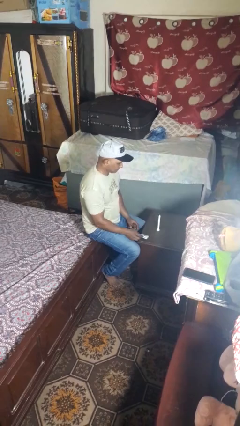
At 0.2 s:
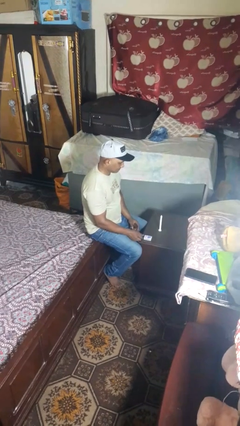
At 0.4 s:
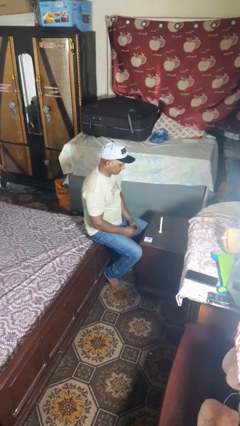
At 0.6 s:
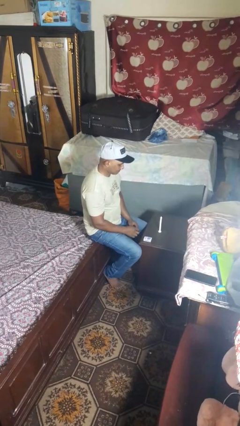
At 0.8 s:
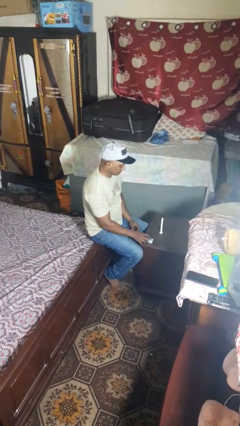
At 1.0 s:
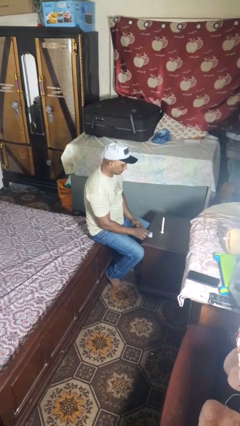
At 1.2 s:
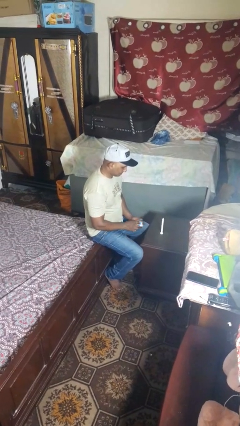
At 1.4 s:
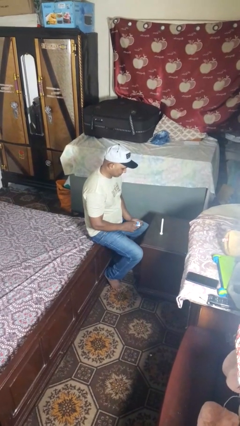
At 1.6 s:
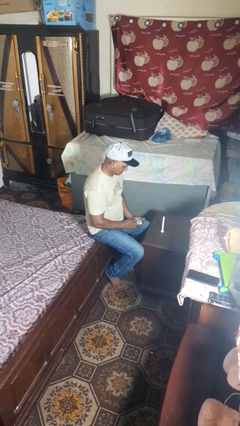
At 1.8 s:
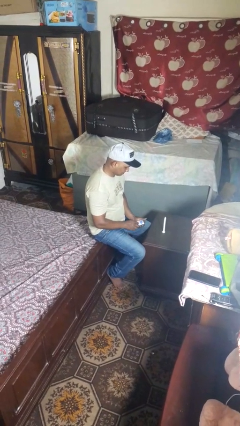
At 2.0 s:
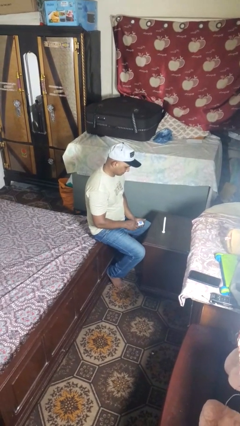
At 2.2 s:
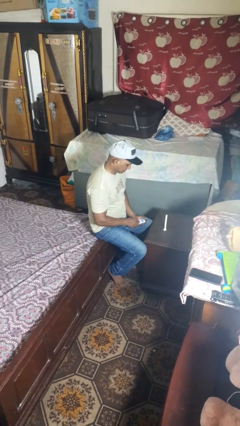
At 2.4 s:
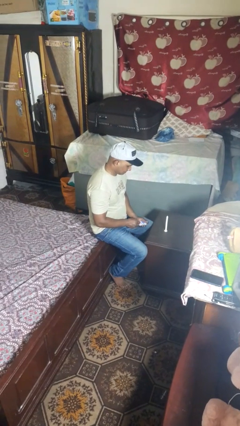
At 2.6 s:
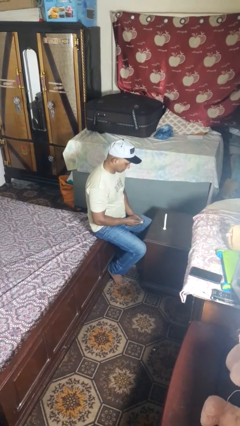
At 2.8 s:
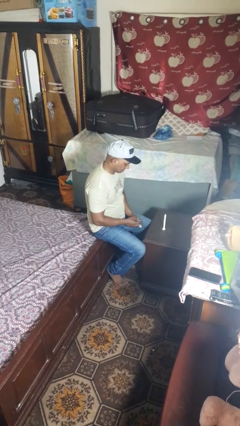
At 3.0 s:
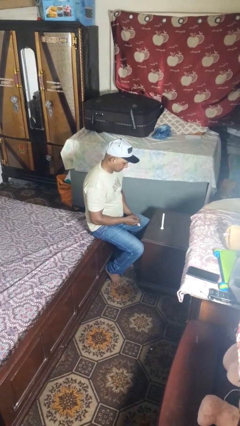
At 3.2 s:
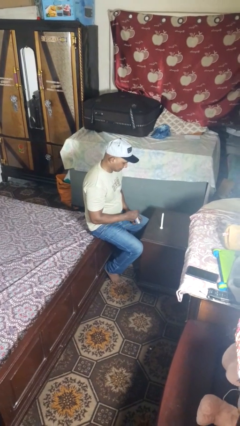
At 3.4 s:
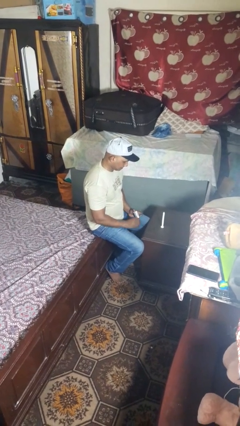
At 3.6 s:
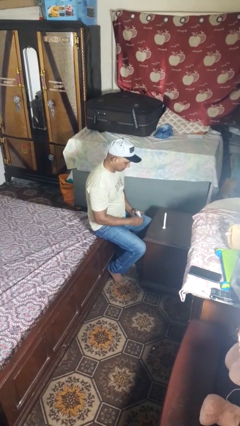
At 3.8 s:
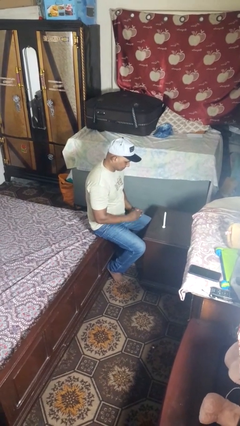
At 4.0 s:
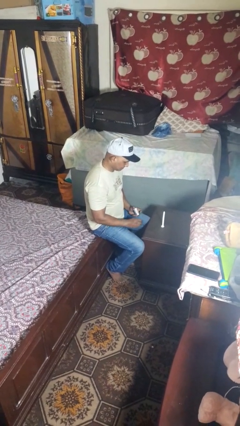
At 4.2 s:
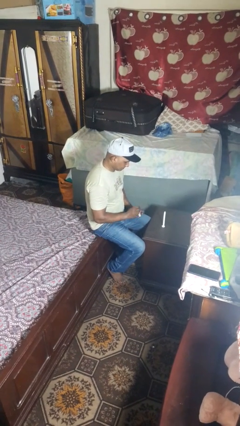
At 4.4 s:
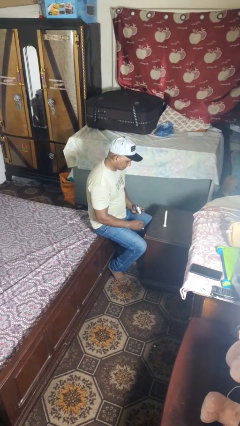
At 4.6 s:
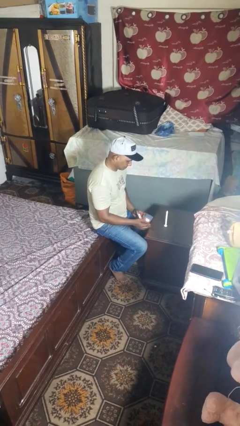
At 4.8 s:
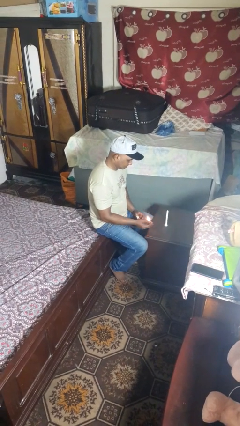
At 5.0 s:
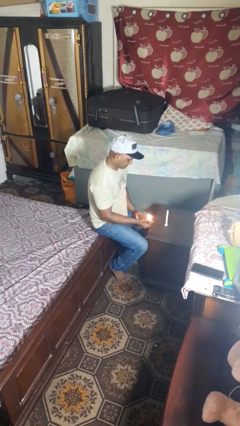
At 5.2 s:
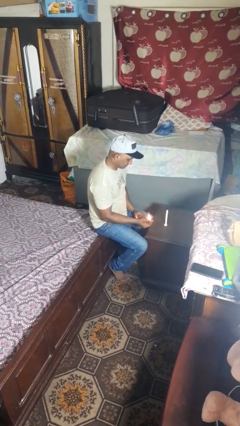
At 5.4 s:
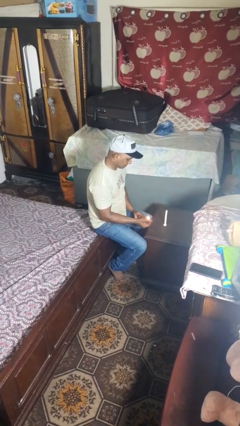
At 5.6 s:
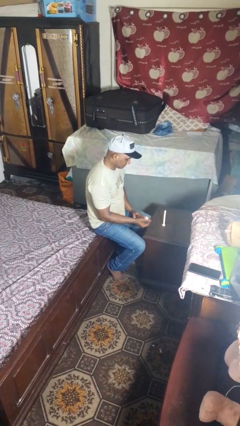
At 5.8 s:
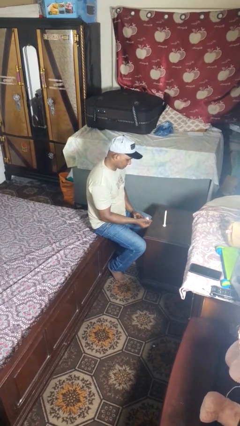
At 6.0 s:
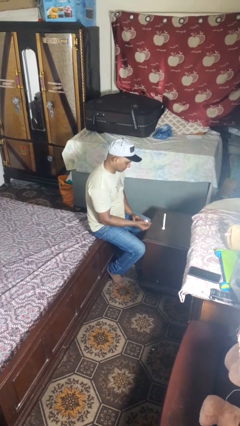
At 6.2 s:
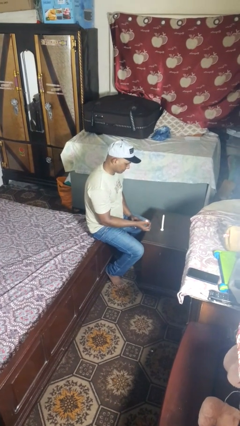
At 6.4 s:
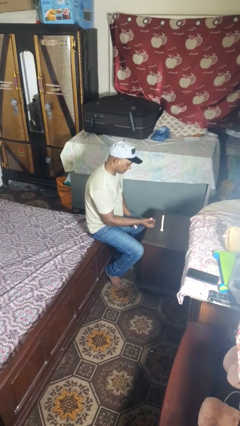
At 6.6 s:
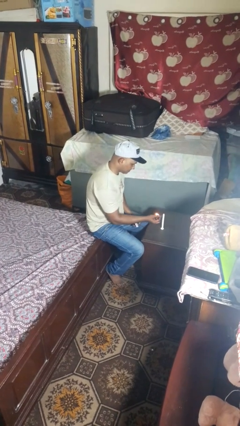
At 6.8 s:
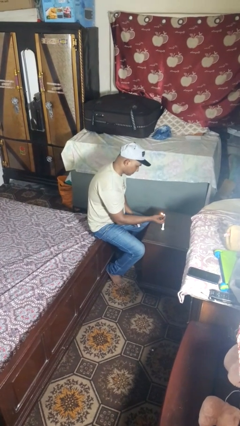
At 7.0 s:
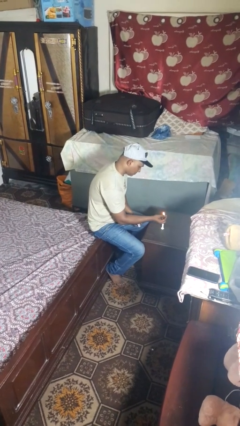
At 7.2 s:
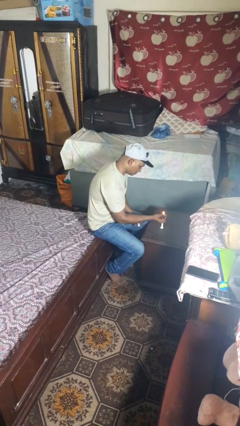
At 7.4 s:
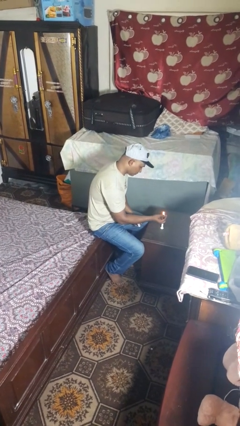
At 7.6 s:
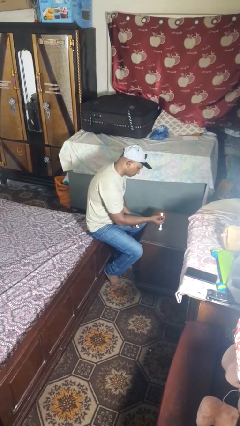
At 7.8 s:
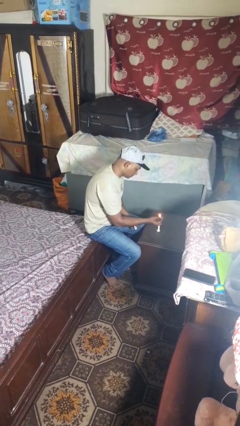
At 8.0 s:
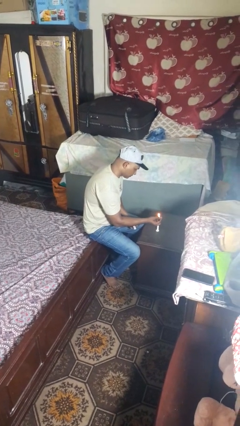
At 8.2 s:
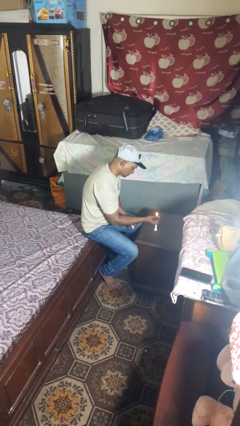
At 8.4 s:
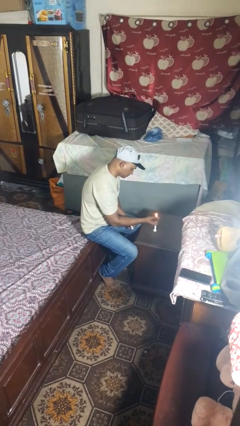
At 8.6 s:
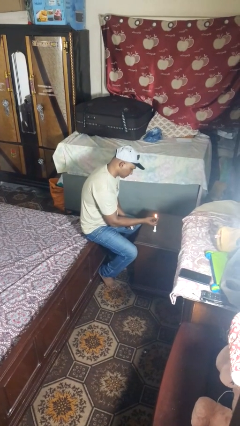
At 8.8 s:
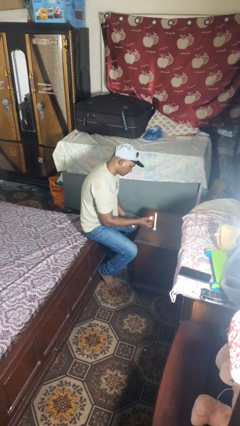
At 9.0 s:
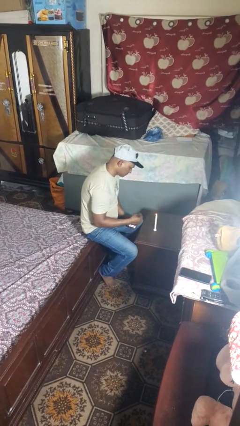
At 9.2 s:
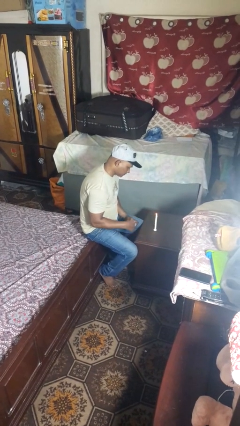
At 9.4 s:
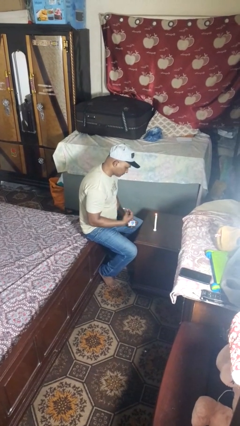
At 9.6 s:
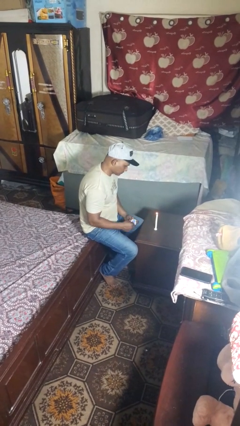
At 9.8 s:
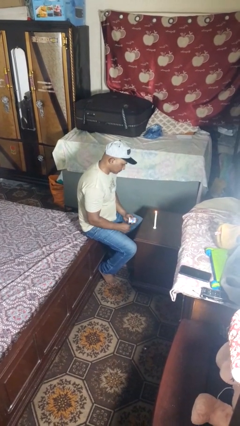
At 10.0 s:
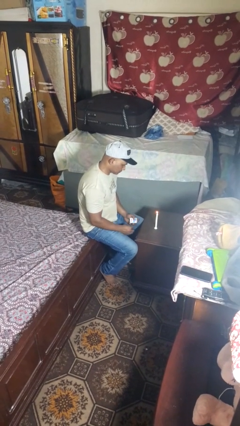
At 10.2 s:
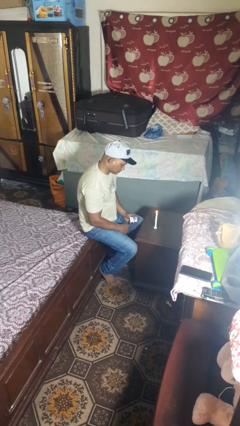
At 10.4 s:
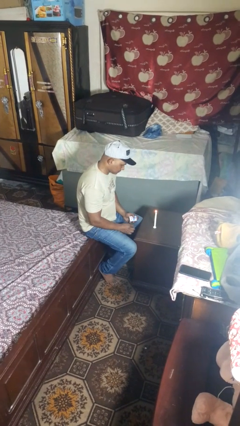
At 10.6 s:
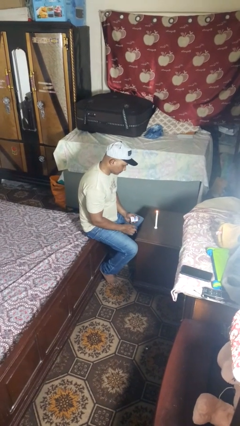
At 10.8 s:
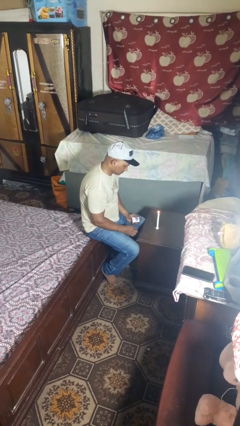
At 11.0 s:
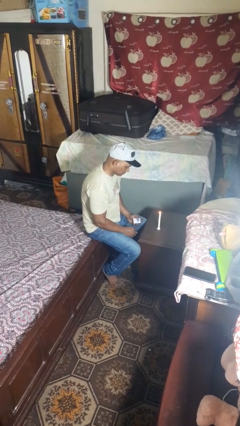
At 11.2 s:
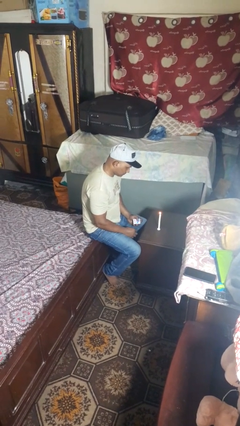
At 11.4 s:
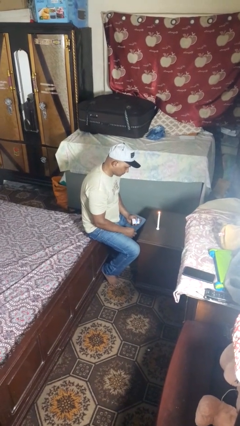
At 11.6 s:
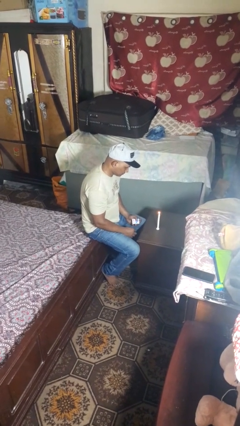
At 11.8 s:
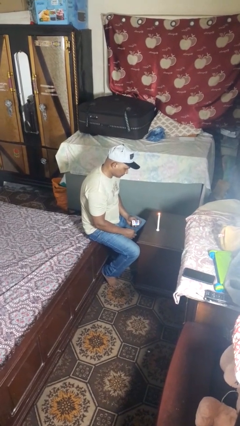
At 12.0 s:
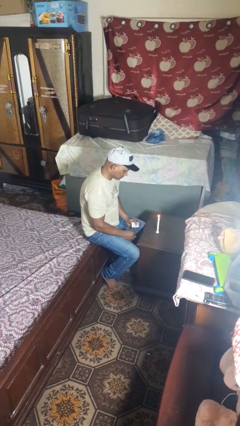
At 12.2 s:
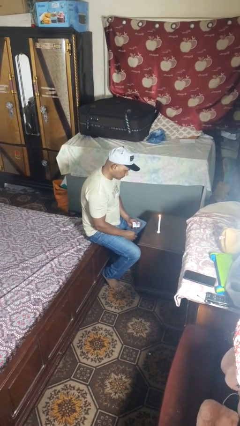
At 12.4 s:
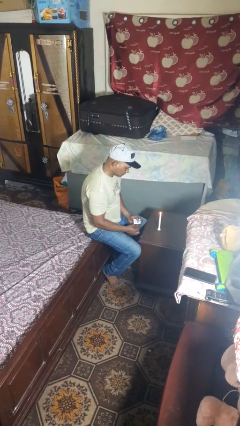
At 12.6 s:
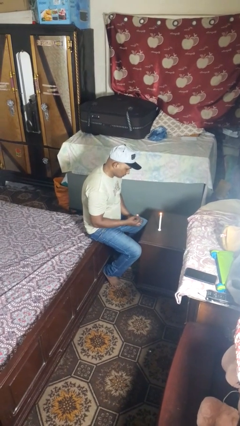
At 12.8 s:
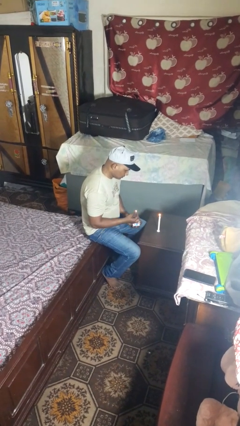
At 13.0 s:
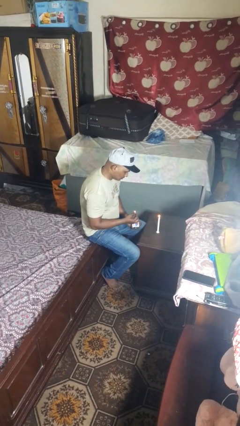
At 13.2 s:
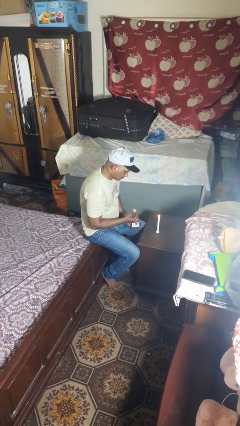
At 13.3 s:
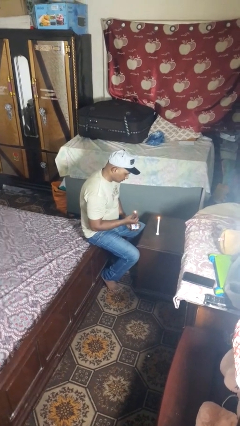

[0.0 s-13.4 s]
person lights candle

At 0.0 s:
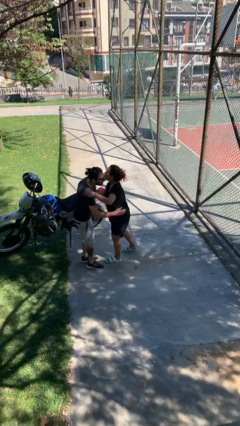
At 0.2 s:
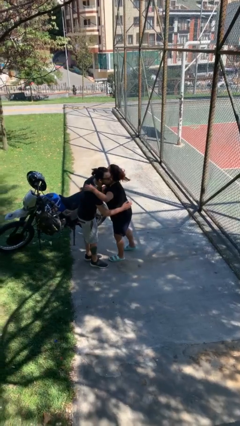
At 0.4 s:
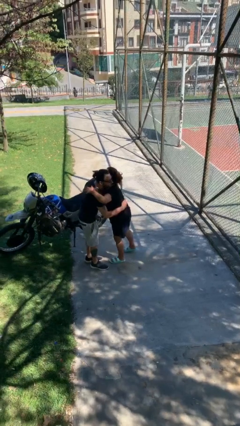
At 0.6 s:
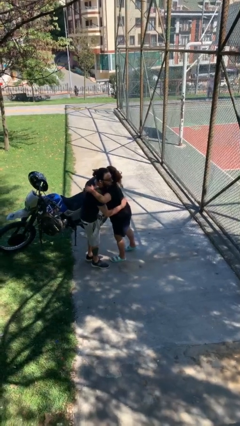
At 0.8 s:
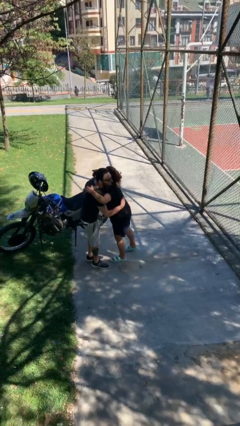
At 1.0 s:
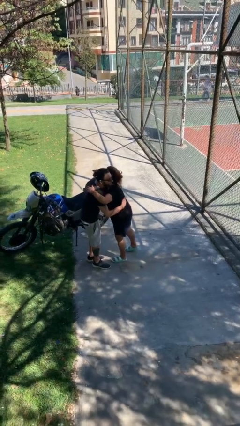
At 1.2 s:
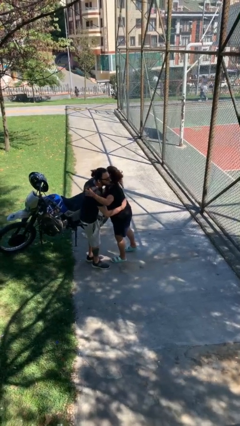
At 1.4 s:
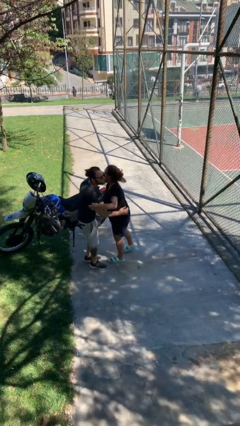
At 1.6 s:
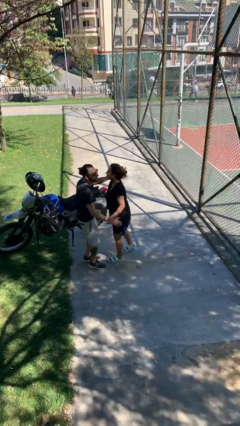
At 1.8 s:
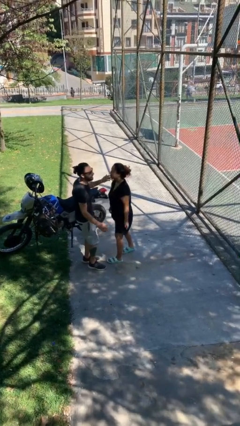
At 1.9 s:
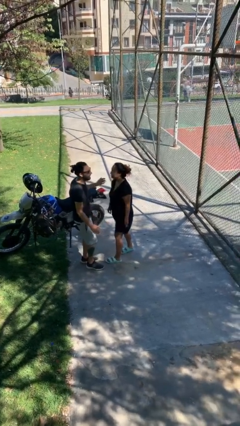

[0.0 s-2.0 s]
person embraces person

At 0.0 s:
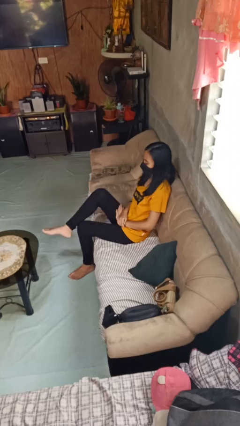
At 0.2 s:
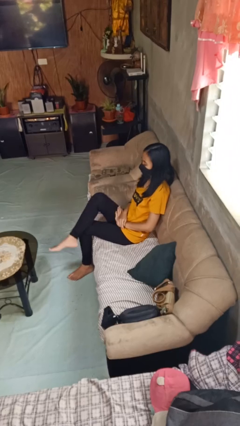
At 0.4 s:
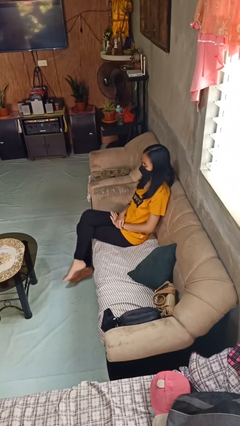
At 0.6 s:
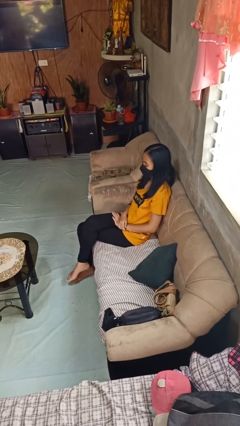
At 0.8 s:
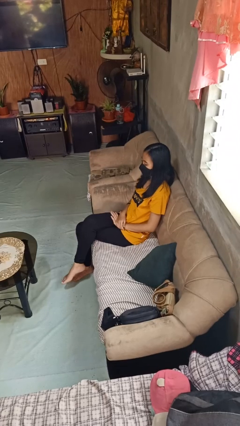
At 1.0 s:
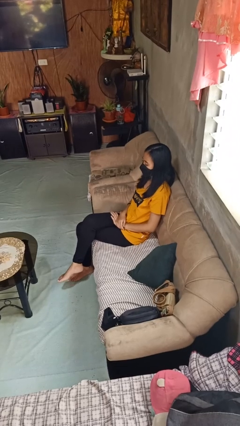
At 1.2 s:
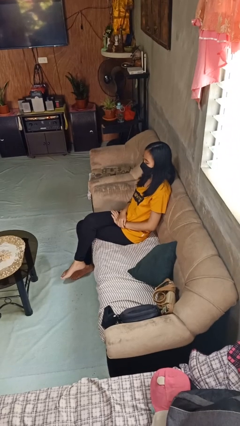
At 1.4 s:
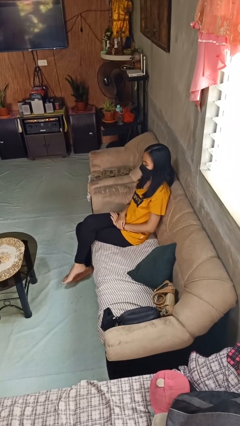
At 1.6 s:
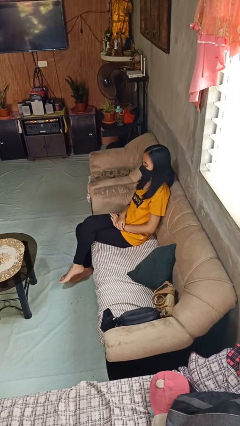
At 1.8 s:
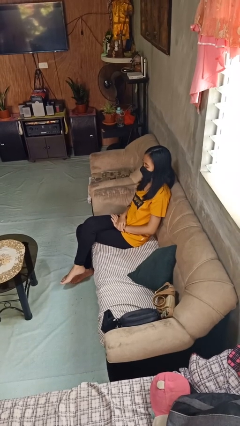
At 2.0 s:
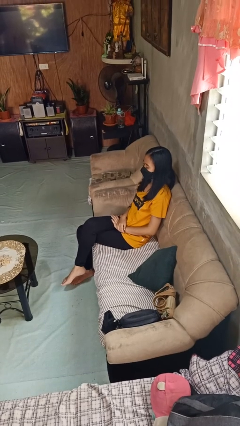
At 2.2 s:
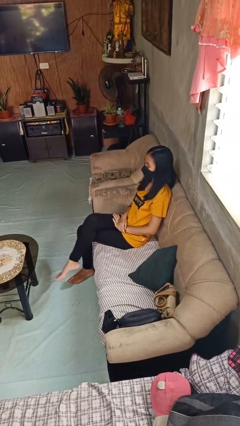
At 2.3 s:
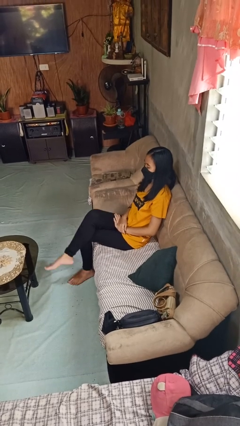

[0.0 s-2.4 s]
person crosses legs

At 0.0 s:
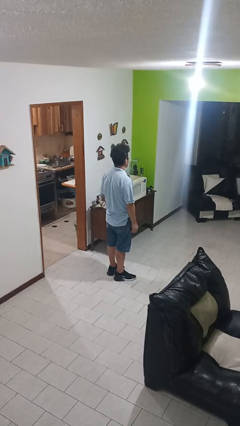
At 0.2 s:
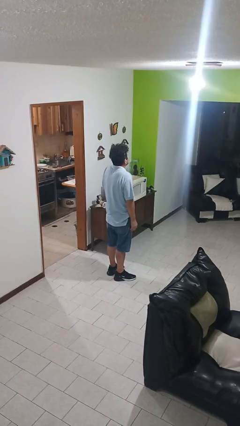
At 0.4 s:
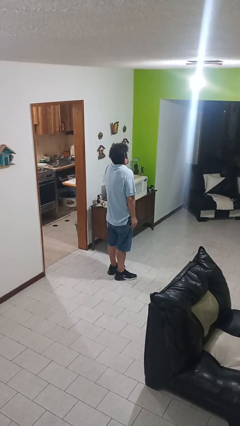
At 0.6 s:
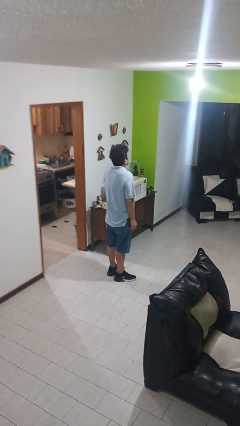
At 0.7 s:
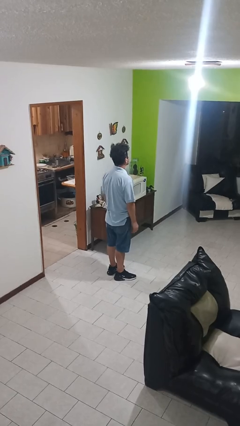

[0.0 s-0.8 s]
person shrugs
